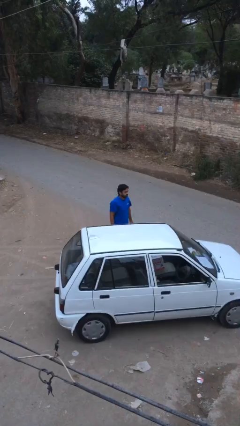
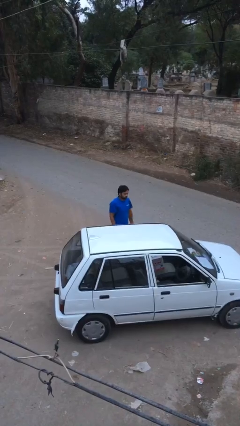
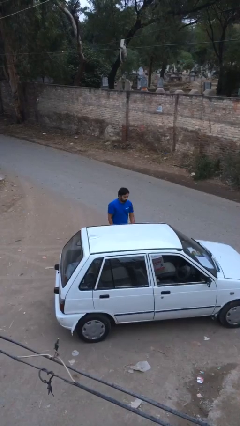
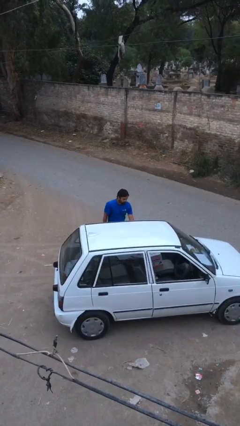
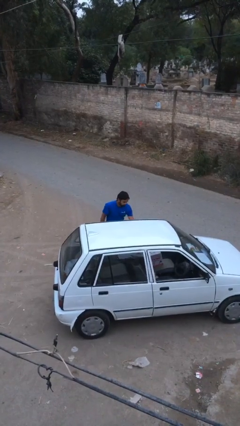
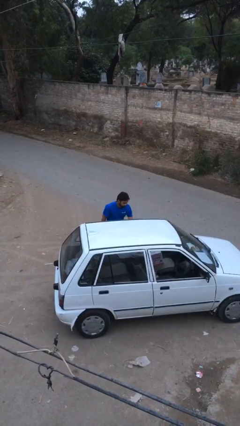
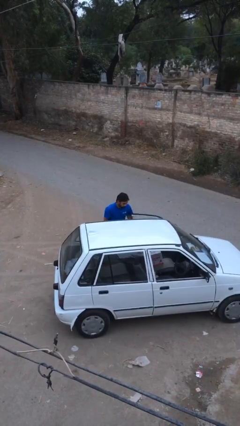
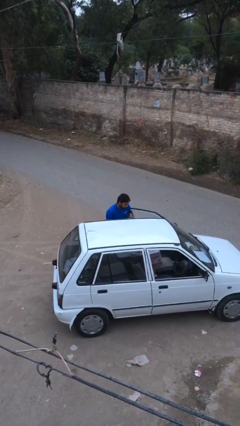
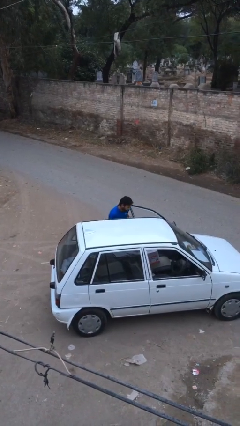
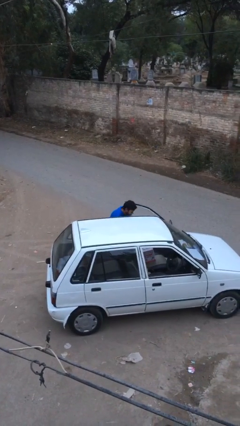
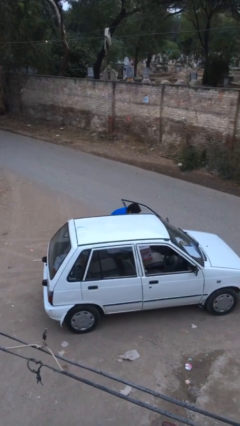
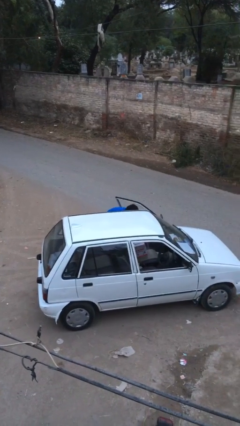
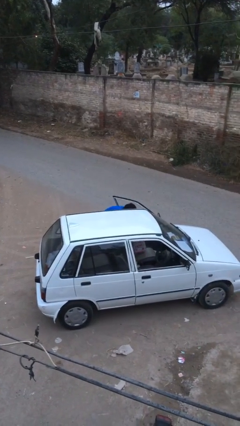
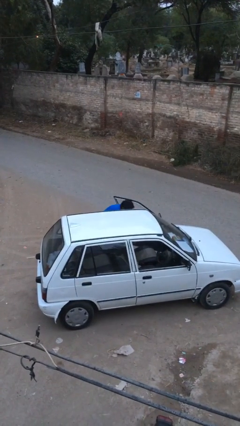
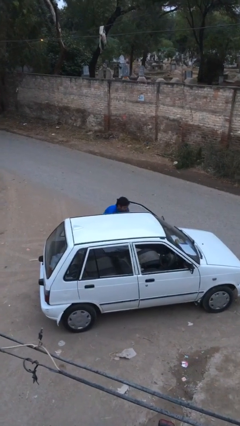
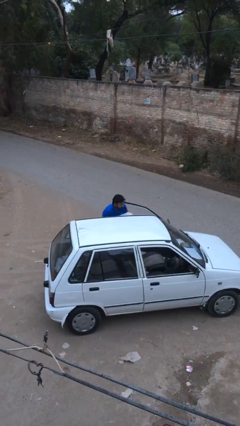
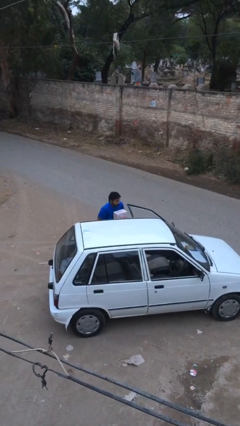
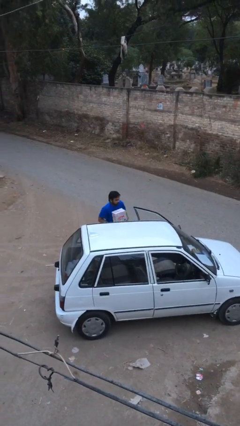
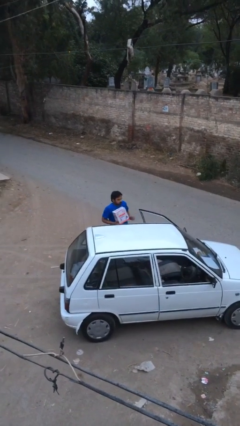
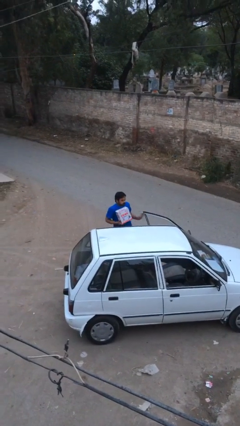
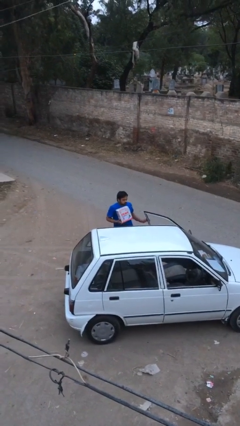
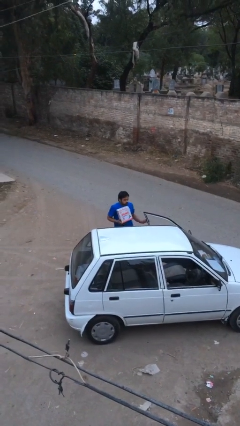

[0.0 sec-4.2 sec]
person unloads car

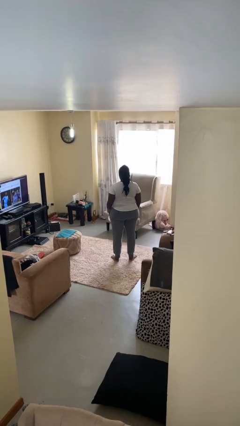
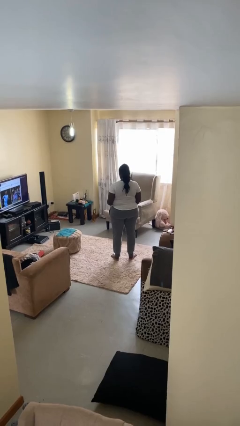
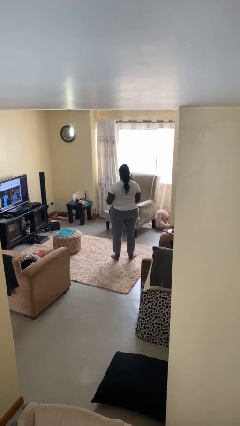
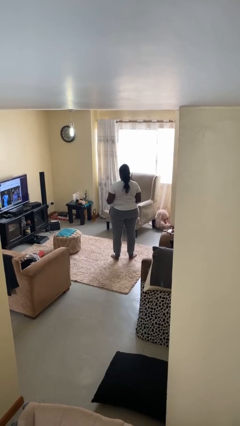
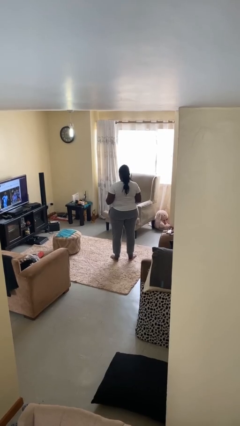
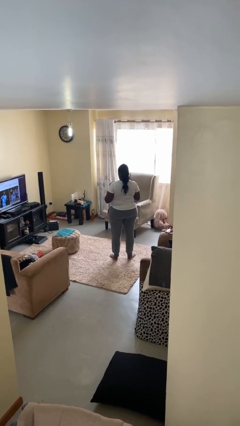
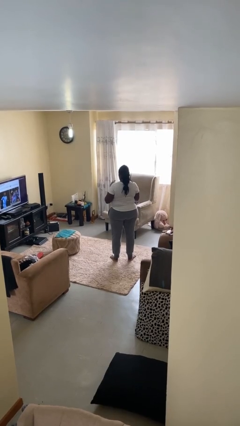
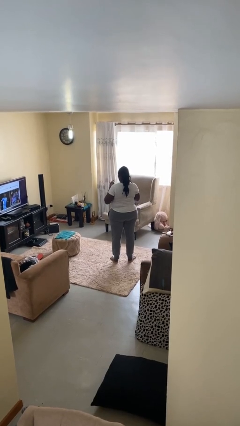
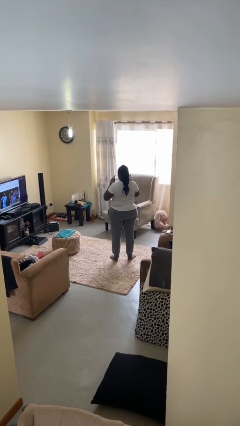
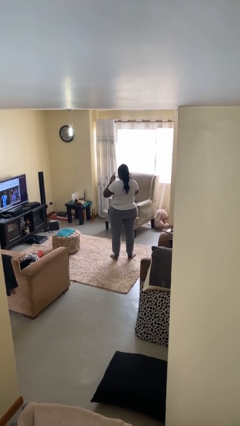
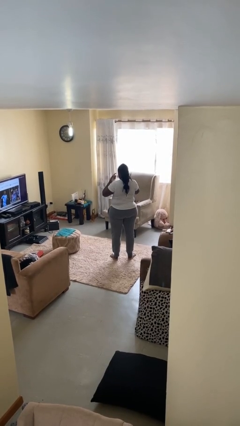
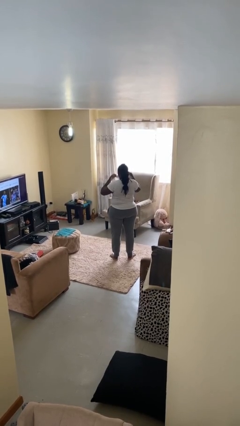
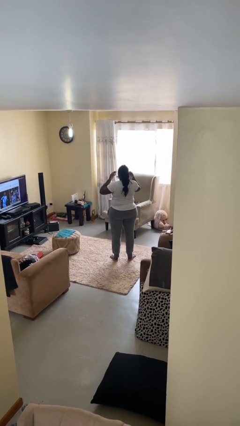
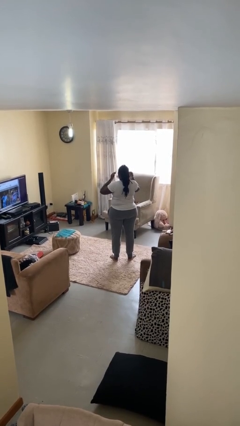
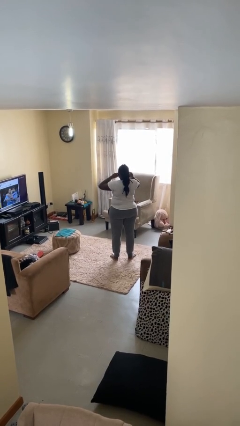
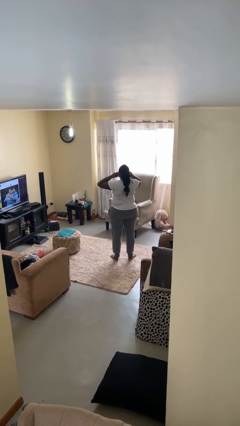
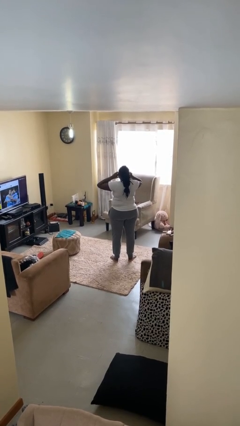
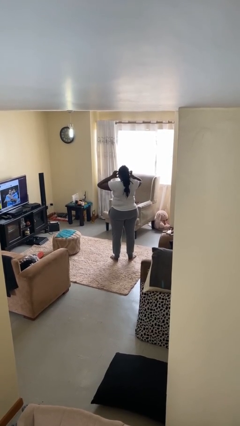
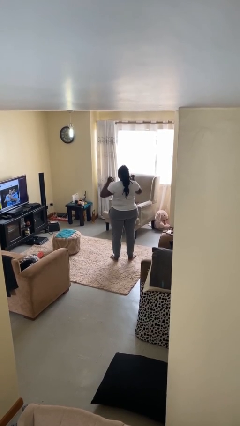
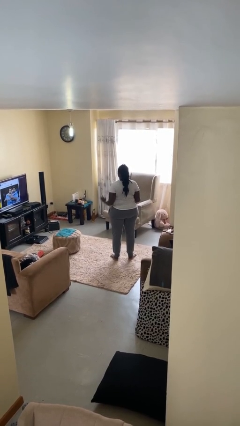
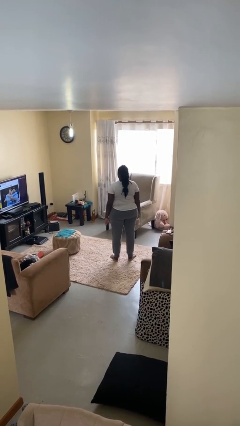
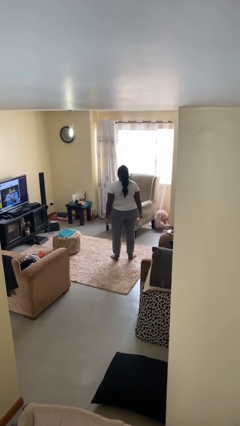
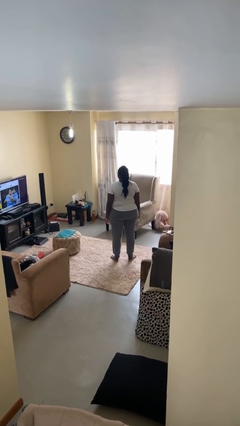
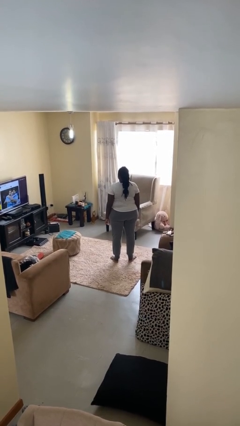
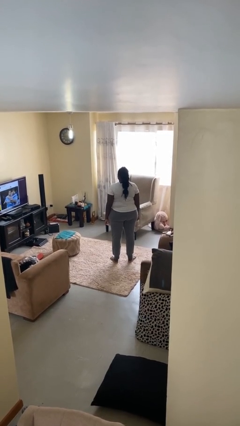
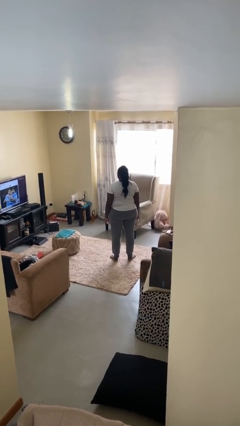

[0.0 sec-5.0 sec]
person puts on facemask

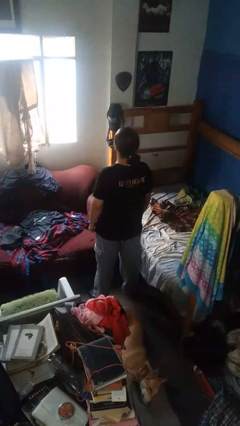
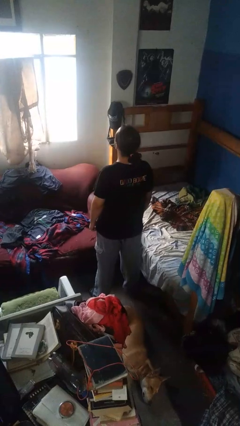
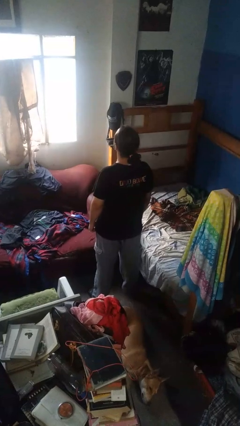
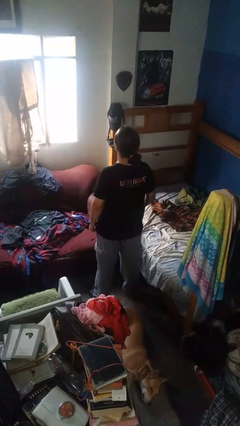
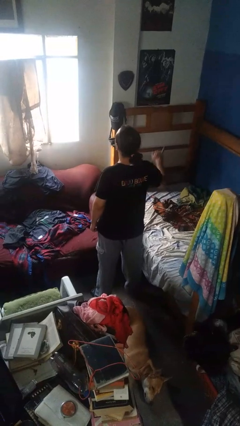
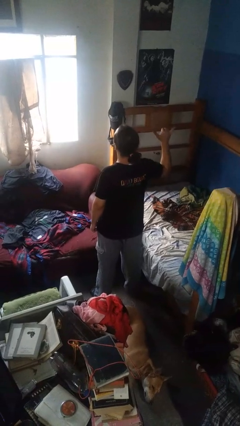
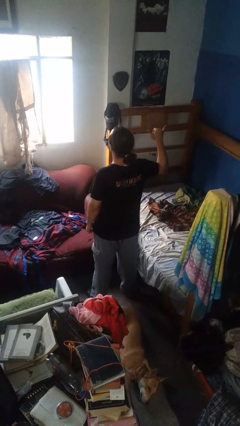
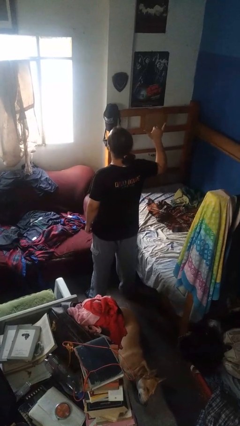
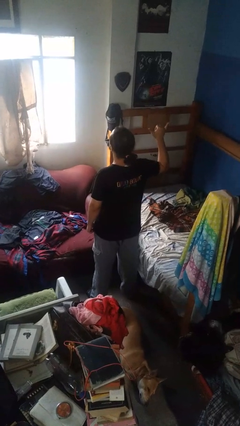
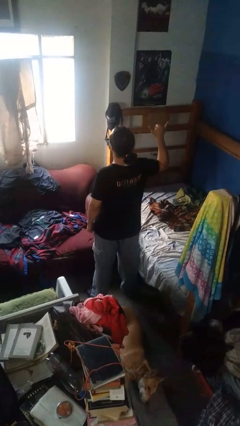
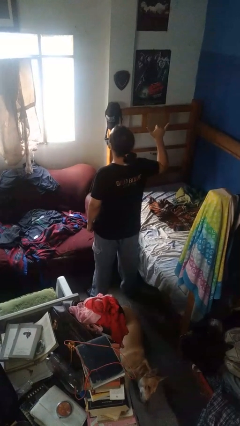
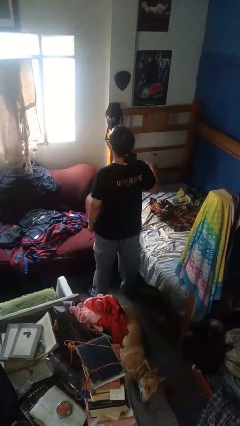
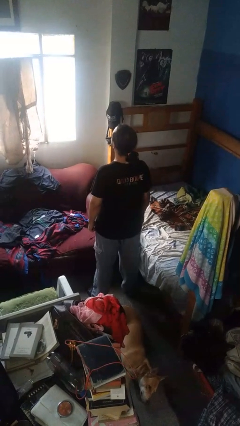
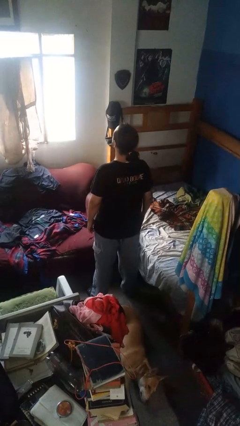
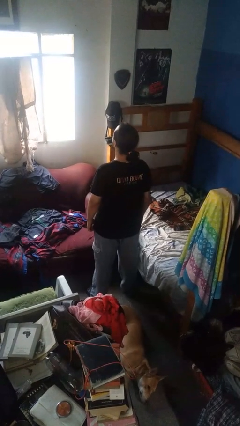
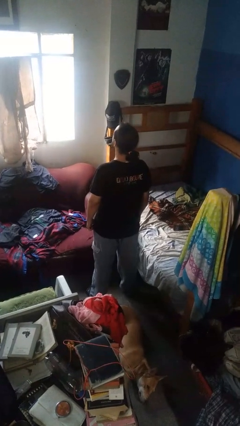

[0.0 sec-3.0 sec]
person gestures hang loose

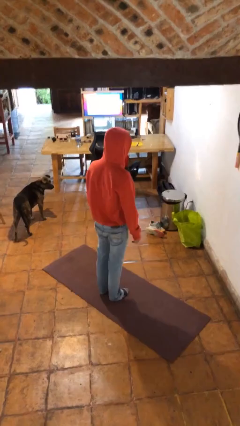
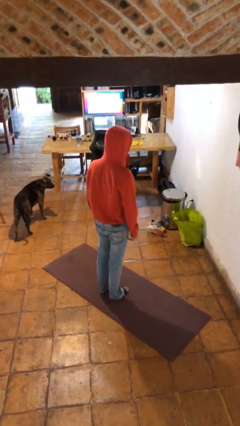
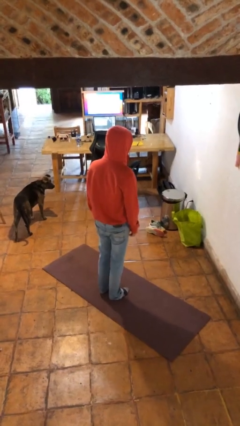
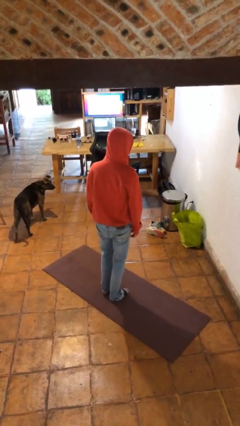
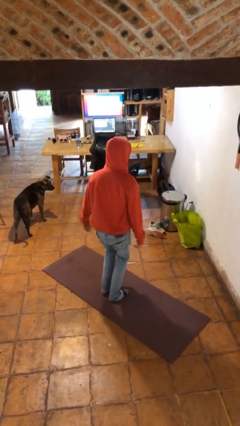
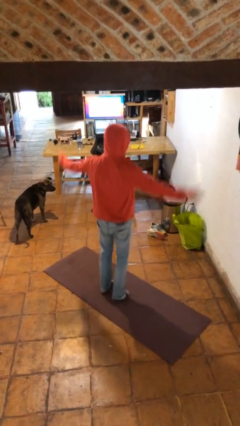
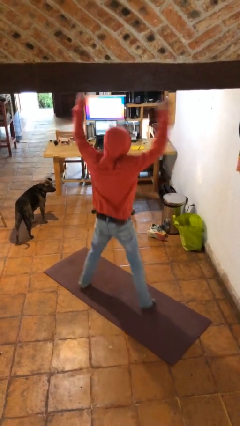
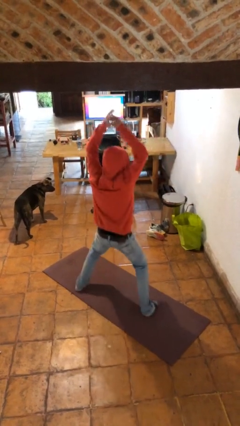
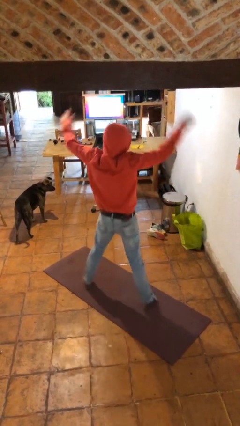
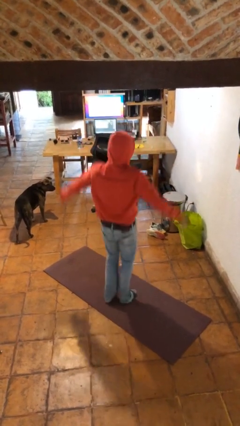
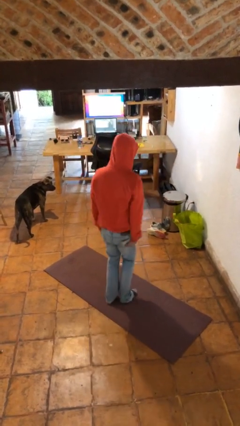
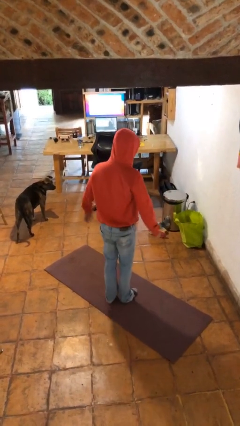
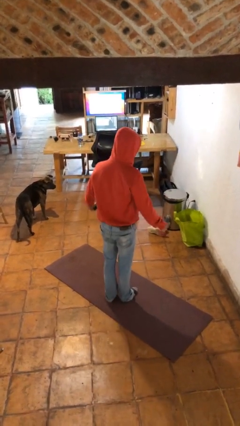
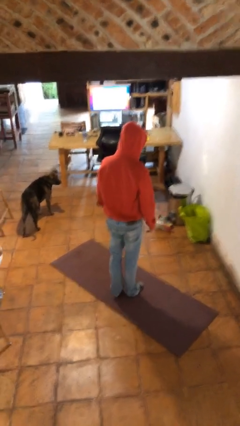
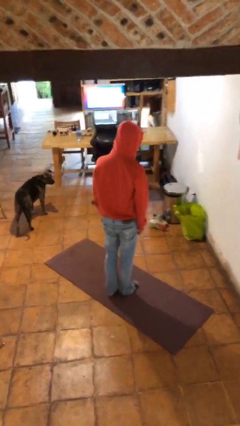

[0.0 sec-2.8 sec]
person exercises with jumping jacks

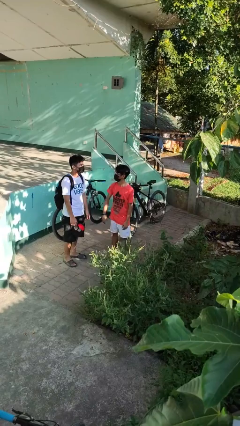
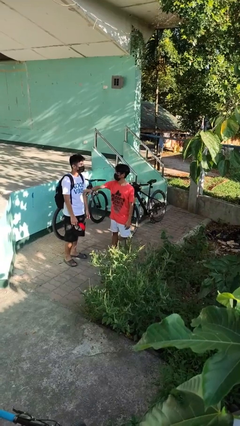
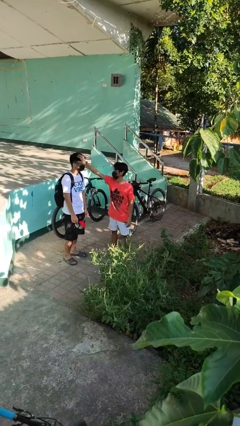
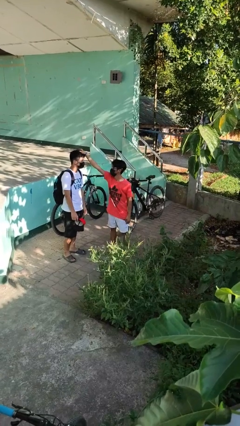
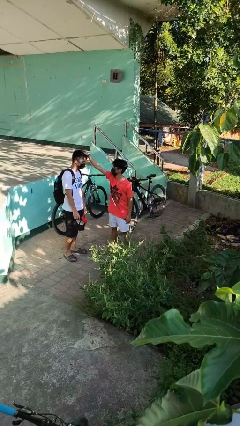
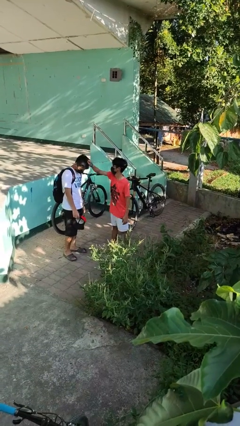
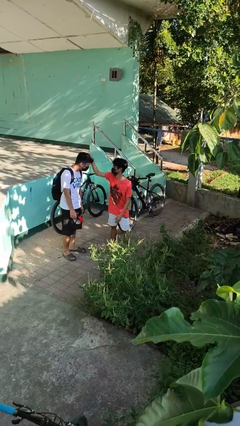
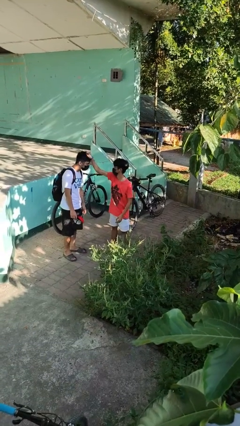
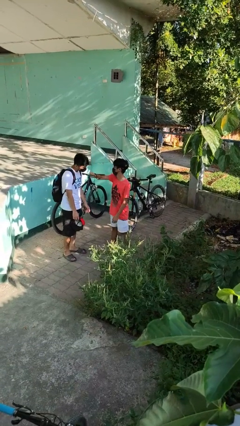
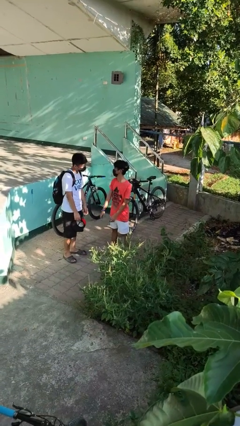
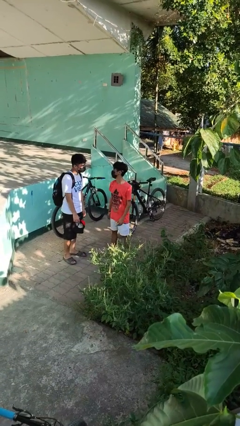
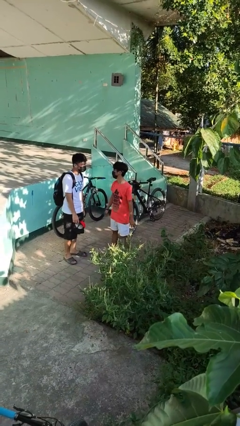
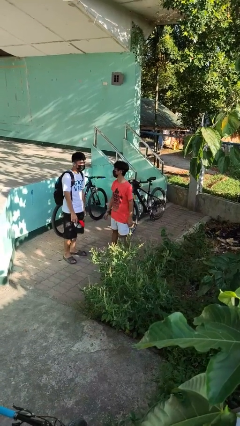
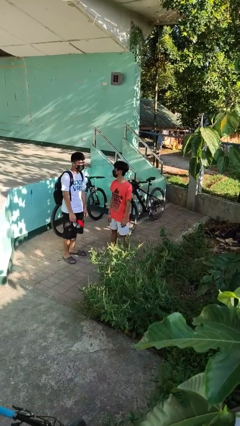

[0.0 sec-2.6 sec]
person grabs person by hair
